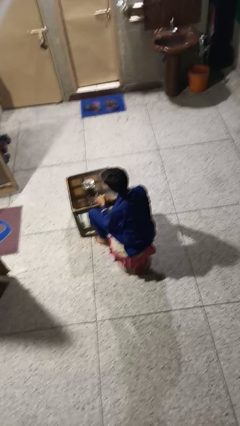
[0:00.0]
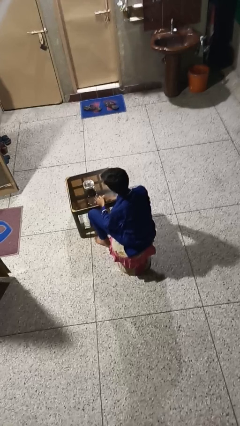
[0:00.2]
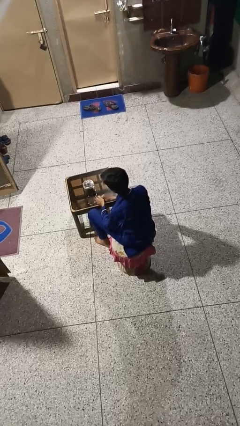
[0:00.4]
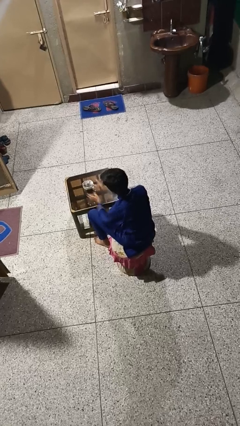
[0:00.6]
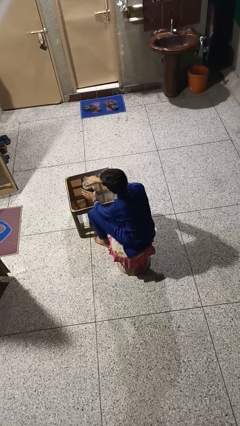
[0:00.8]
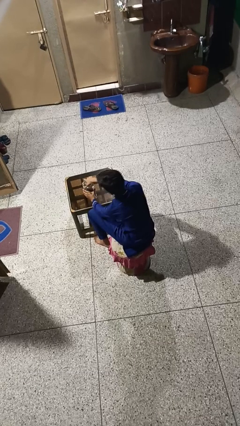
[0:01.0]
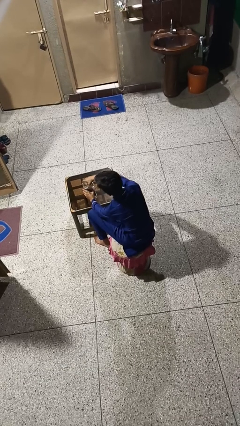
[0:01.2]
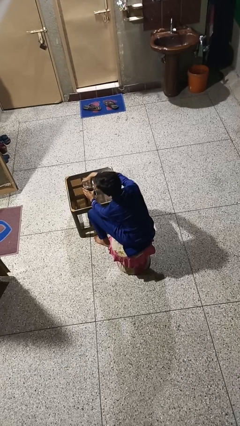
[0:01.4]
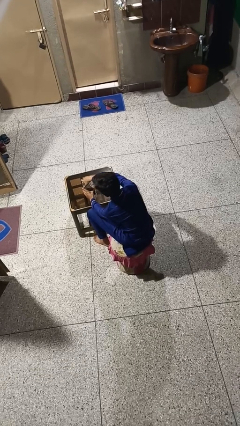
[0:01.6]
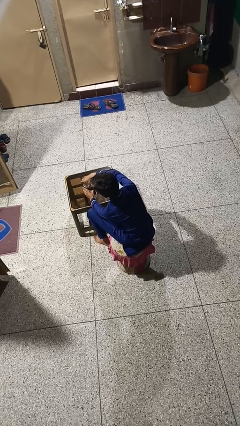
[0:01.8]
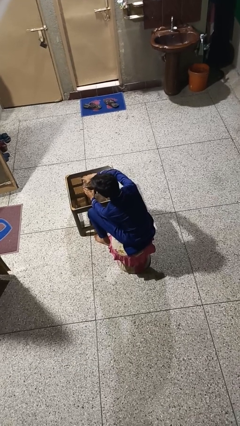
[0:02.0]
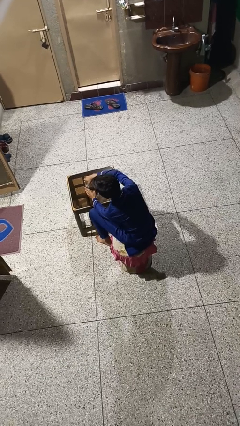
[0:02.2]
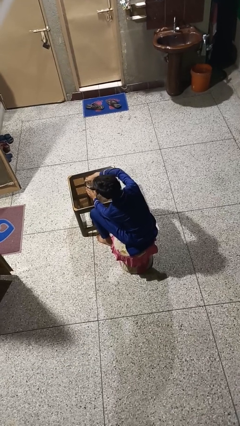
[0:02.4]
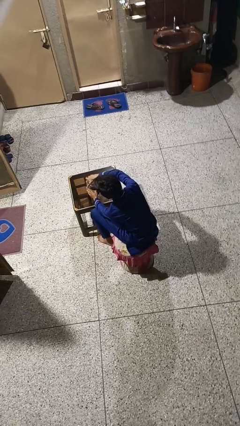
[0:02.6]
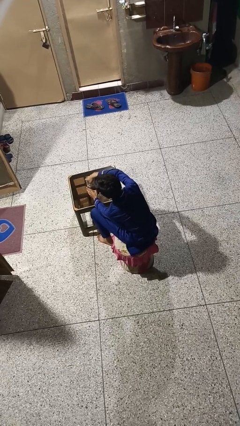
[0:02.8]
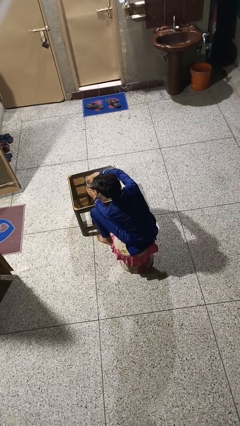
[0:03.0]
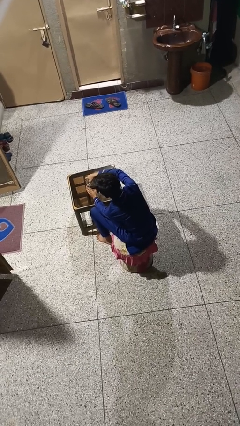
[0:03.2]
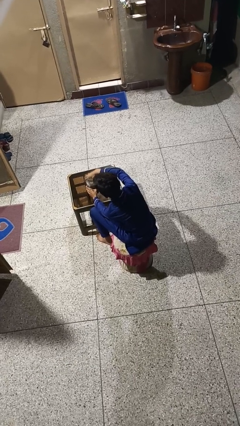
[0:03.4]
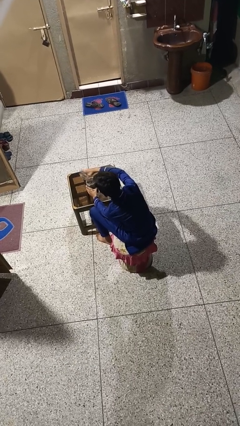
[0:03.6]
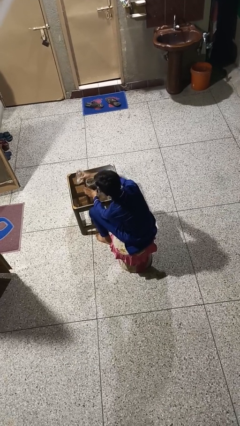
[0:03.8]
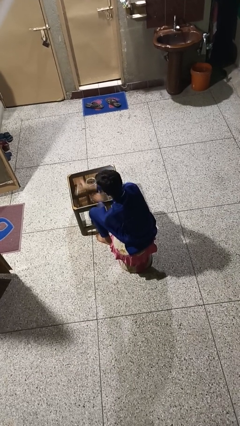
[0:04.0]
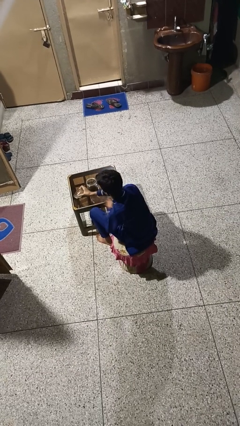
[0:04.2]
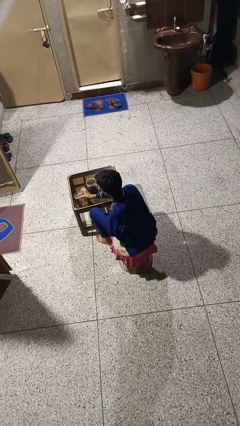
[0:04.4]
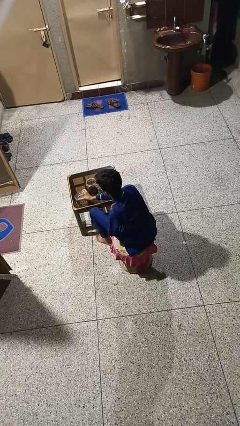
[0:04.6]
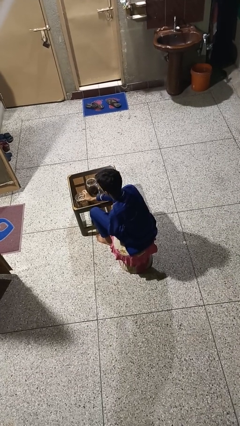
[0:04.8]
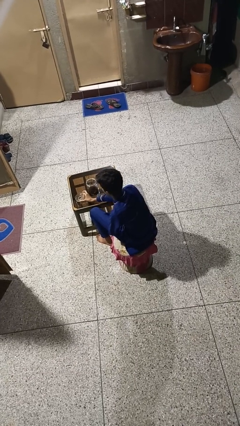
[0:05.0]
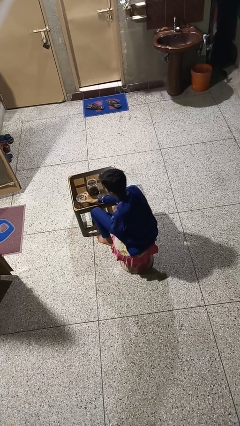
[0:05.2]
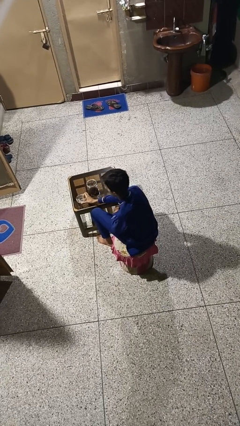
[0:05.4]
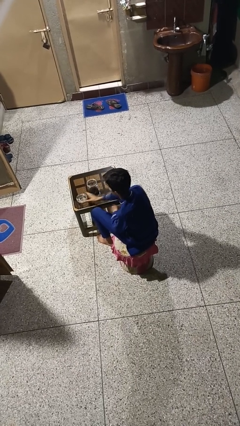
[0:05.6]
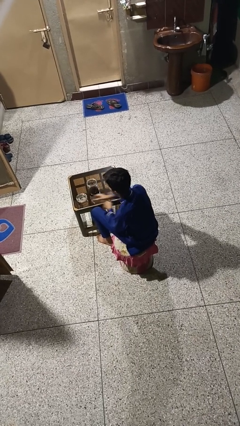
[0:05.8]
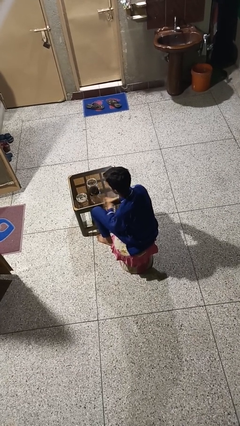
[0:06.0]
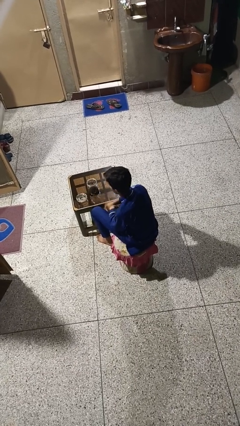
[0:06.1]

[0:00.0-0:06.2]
person opens jar

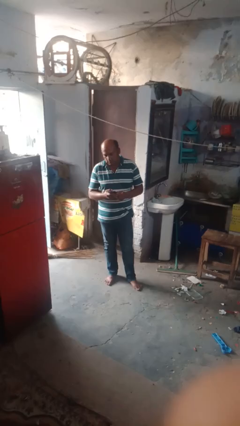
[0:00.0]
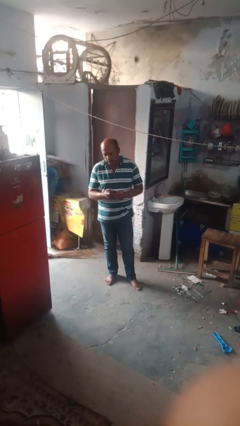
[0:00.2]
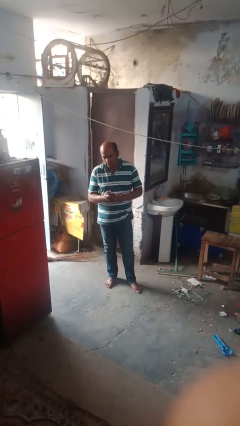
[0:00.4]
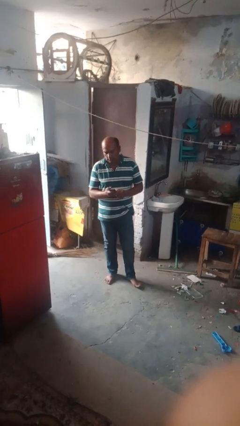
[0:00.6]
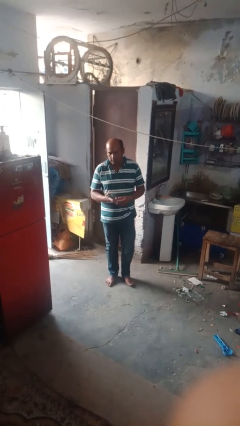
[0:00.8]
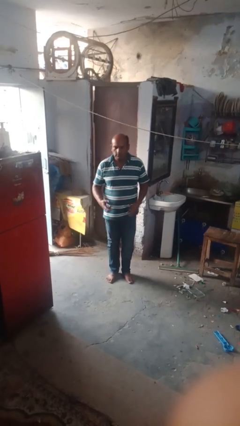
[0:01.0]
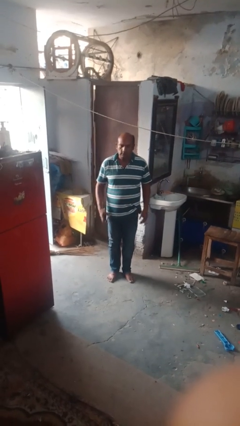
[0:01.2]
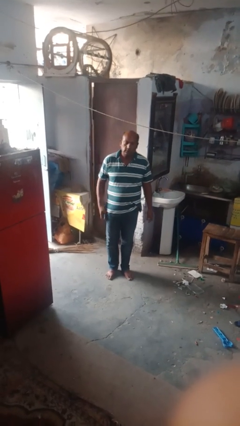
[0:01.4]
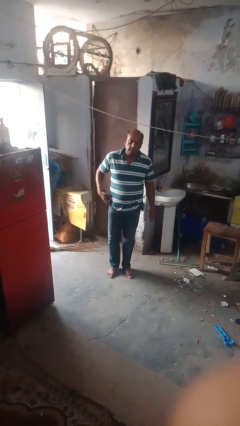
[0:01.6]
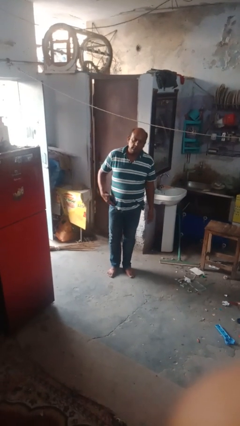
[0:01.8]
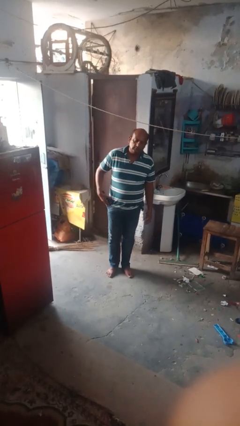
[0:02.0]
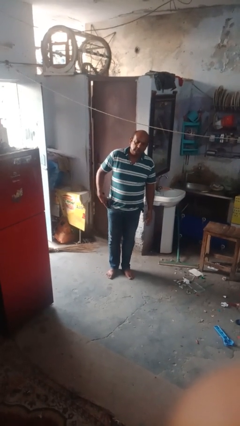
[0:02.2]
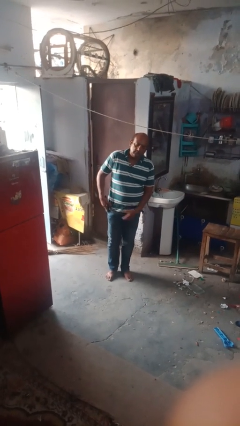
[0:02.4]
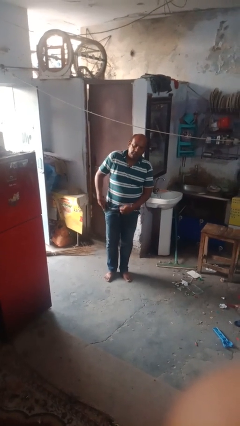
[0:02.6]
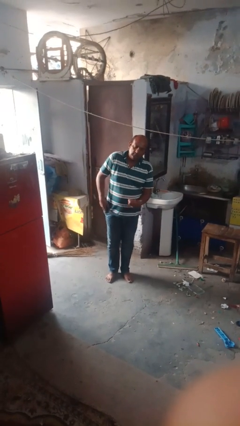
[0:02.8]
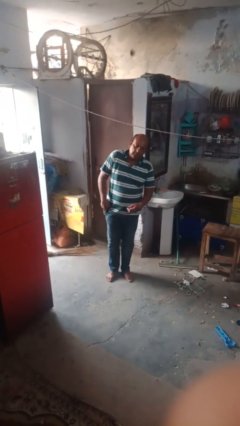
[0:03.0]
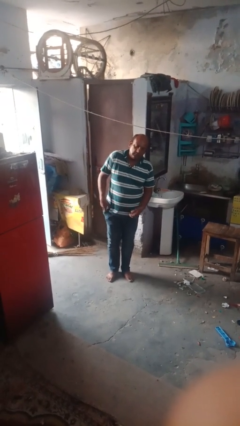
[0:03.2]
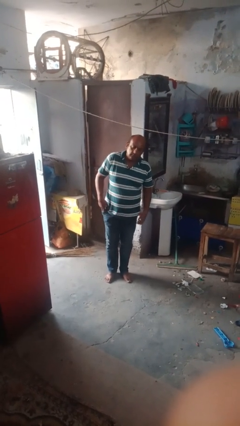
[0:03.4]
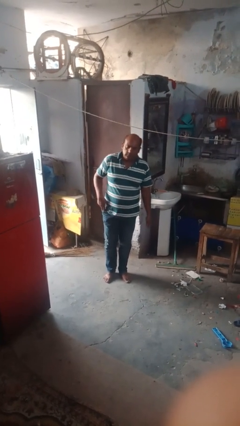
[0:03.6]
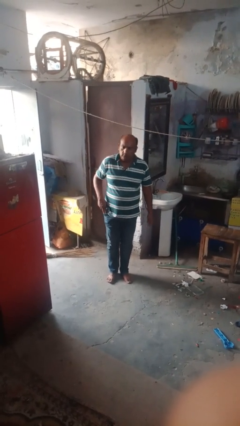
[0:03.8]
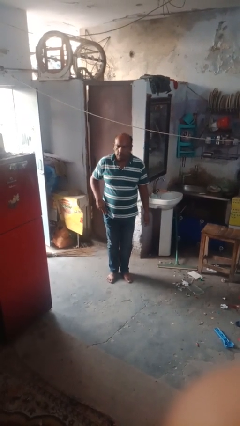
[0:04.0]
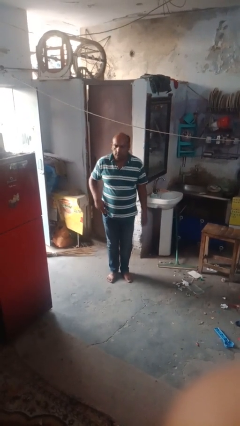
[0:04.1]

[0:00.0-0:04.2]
person puts phone into pocket

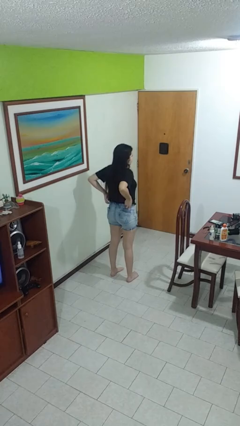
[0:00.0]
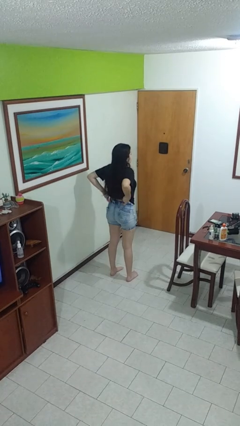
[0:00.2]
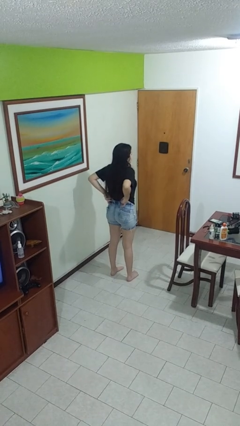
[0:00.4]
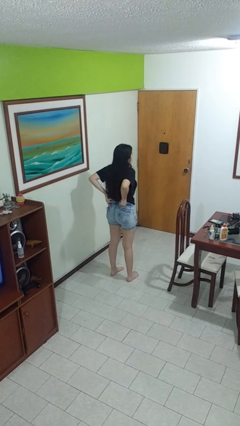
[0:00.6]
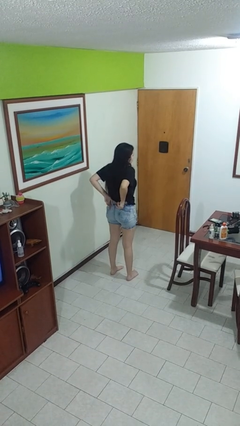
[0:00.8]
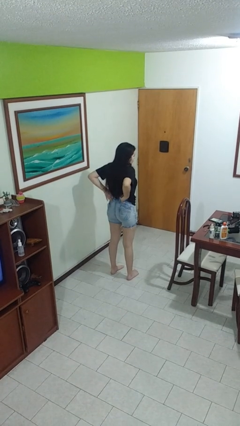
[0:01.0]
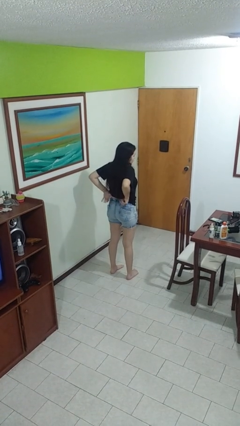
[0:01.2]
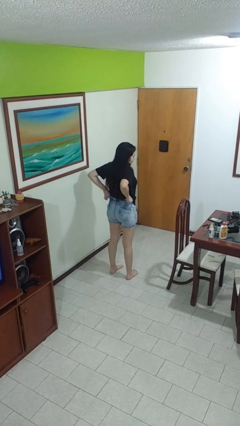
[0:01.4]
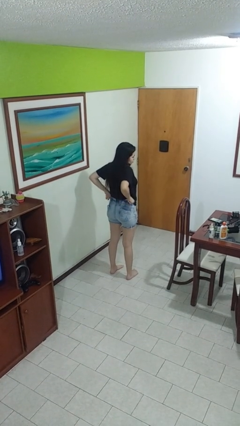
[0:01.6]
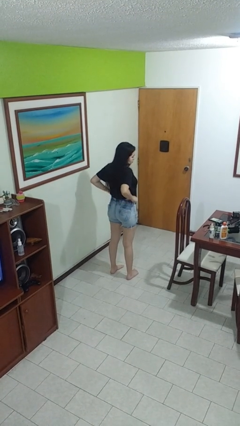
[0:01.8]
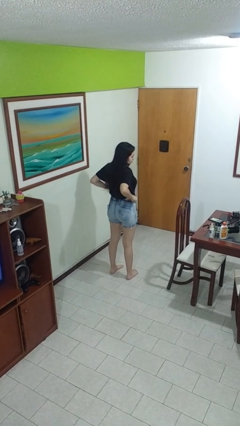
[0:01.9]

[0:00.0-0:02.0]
person hikes up pants

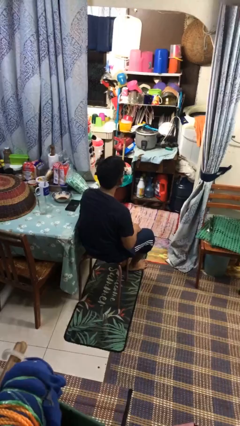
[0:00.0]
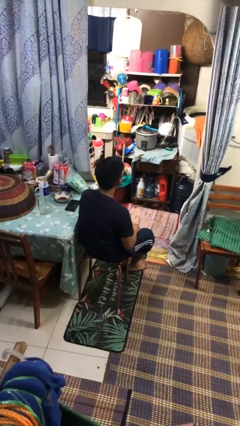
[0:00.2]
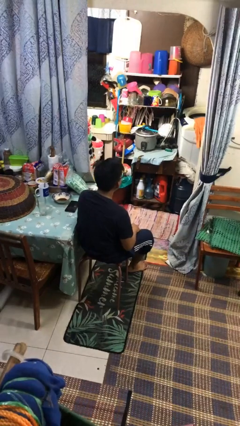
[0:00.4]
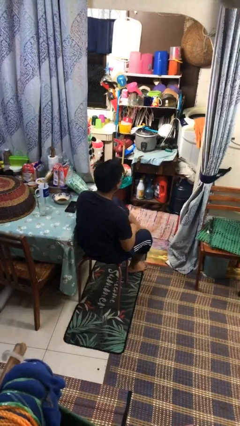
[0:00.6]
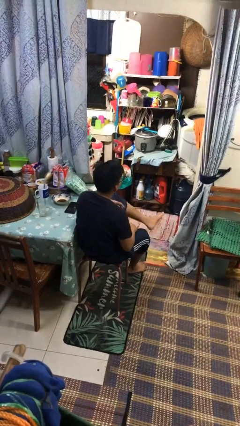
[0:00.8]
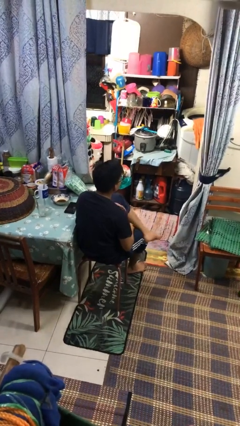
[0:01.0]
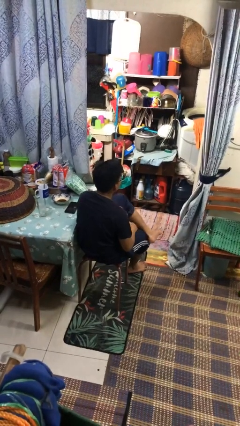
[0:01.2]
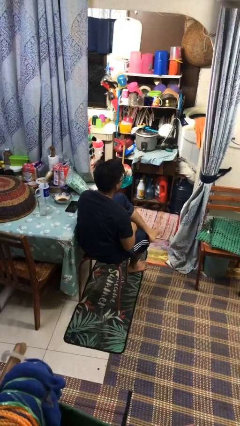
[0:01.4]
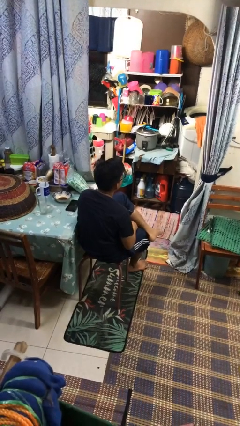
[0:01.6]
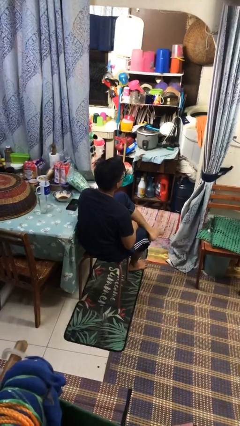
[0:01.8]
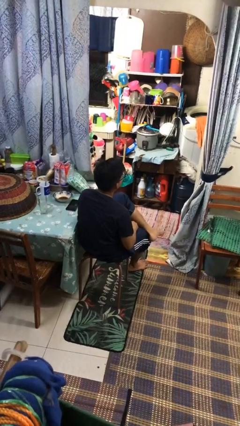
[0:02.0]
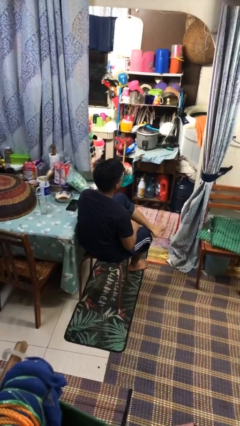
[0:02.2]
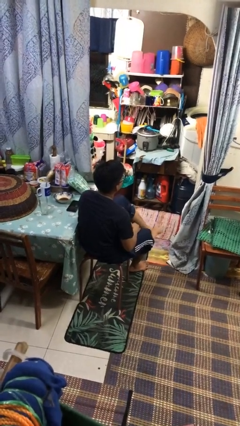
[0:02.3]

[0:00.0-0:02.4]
person crosses legs

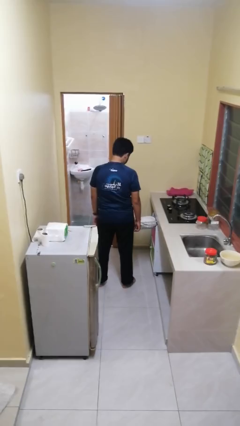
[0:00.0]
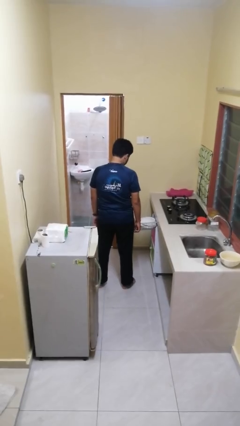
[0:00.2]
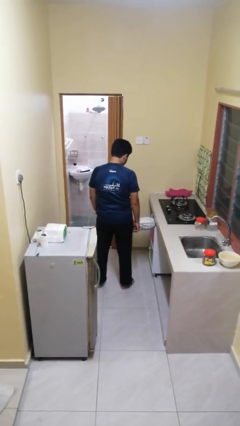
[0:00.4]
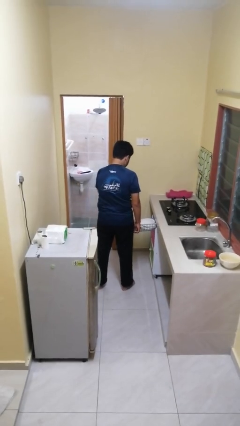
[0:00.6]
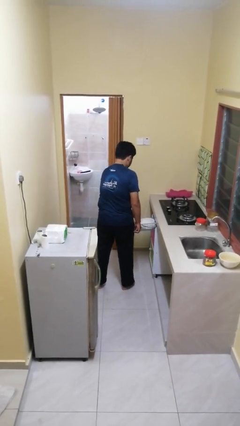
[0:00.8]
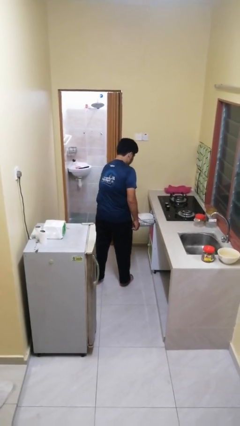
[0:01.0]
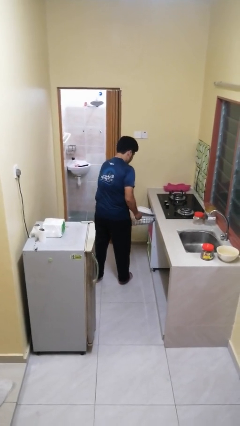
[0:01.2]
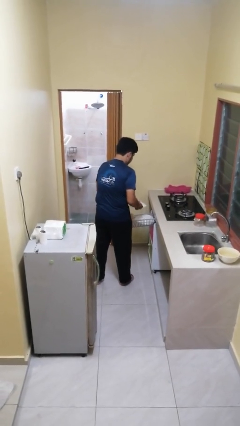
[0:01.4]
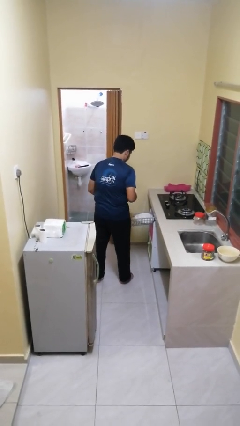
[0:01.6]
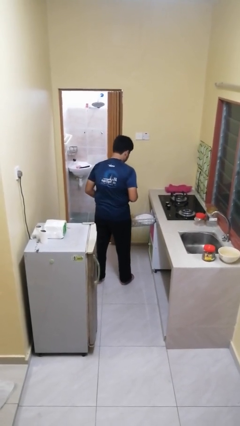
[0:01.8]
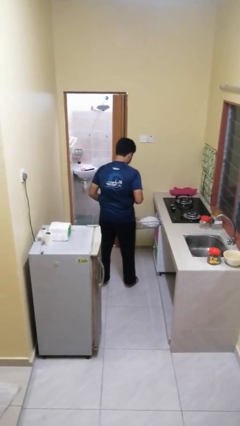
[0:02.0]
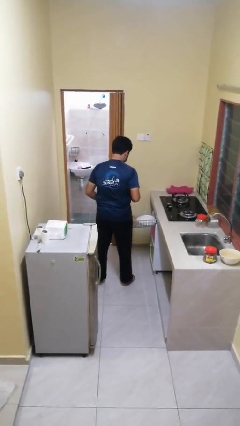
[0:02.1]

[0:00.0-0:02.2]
person takes object from kitchen drawer

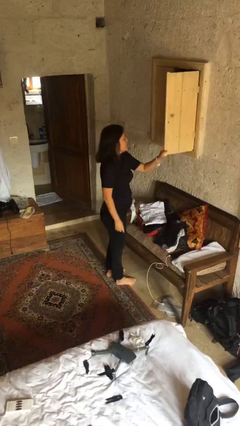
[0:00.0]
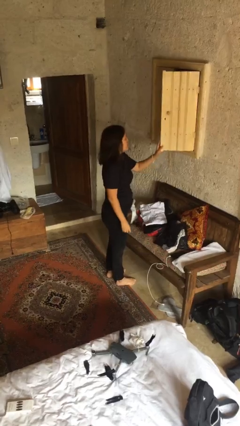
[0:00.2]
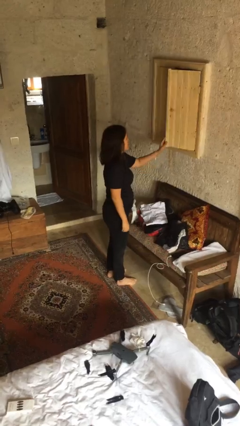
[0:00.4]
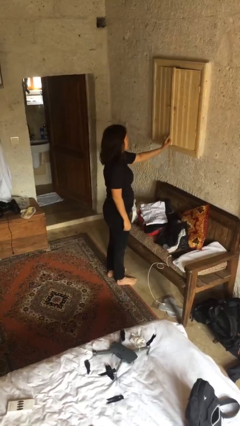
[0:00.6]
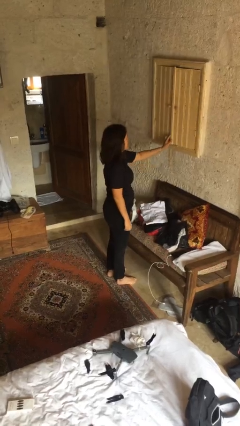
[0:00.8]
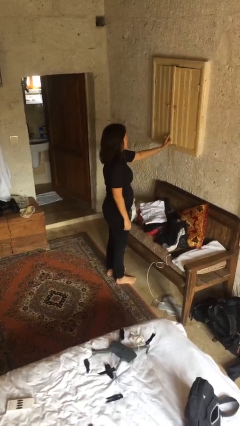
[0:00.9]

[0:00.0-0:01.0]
person closes dresser drawer
